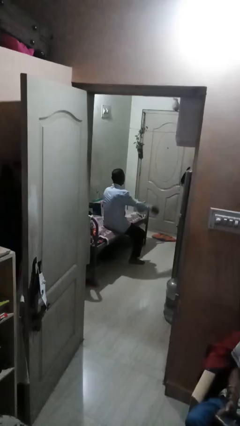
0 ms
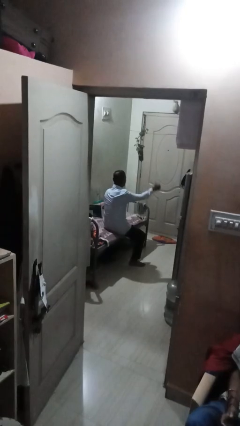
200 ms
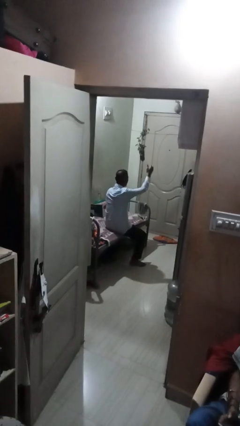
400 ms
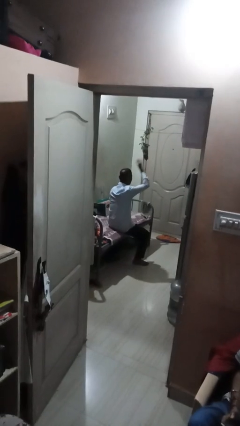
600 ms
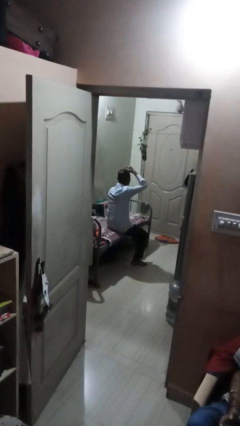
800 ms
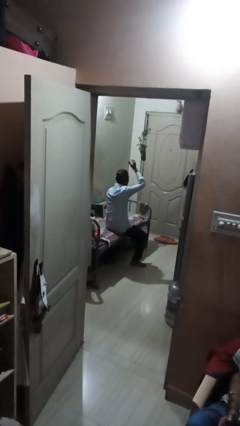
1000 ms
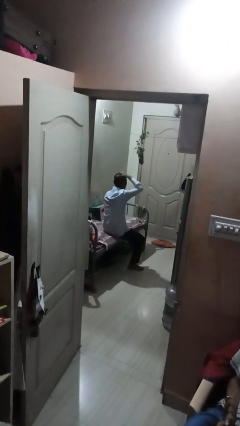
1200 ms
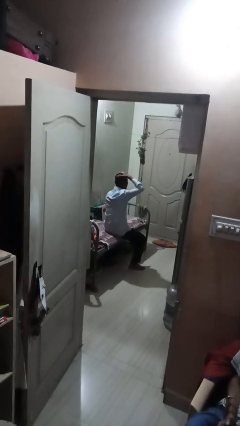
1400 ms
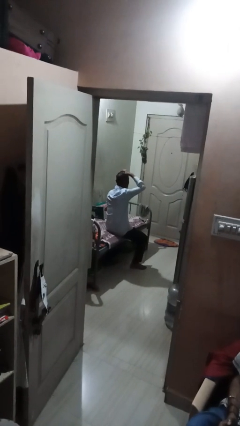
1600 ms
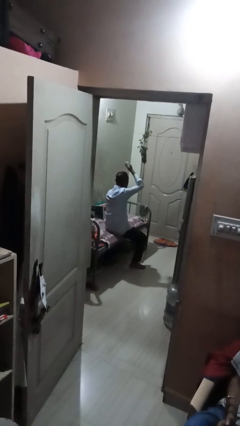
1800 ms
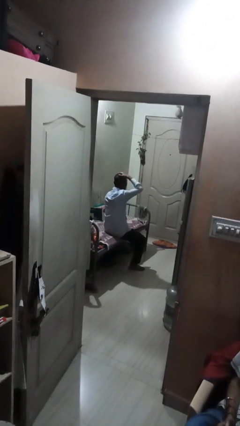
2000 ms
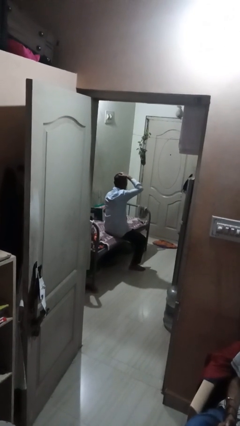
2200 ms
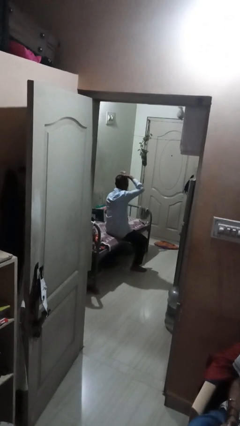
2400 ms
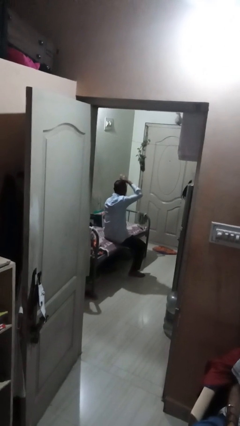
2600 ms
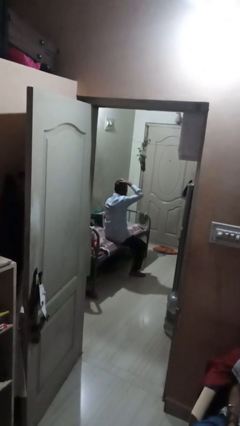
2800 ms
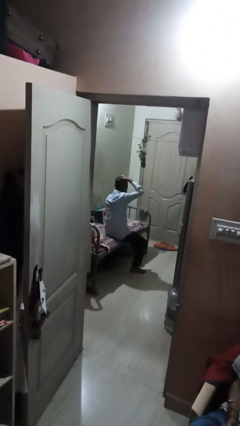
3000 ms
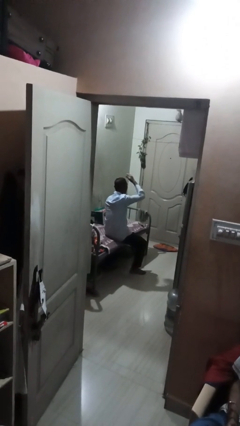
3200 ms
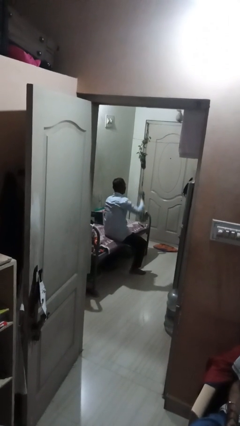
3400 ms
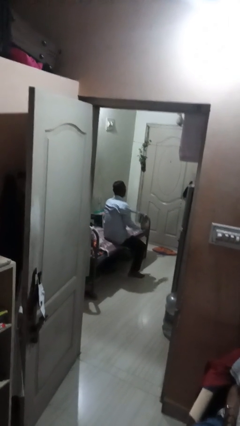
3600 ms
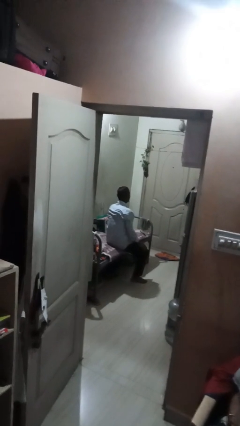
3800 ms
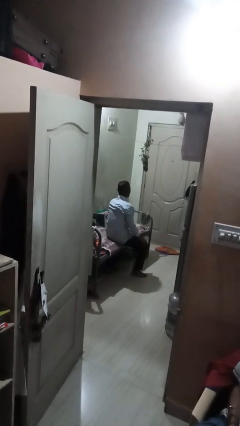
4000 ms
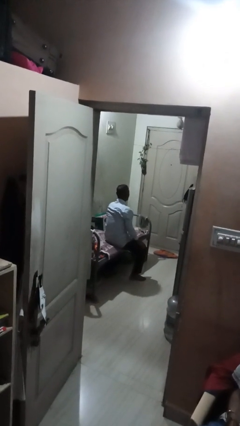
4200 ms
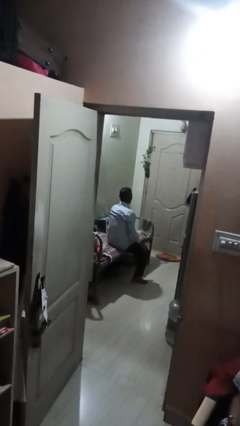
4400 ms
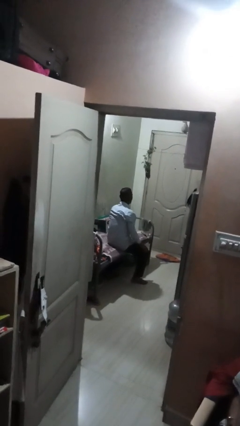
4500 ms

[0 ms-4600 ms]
person pats head

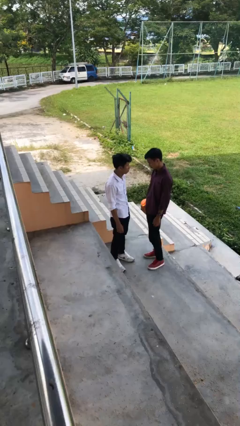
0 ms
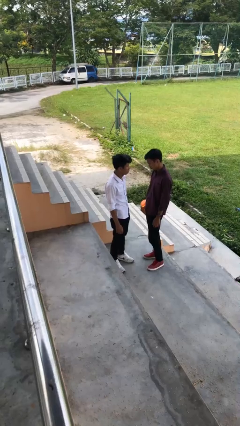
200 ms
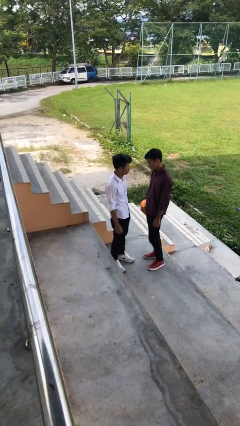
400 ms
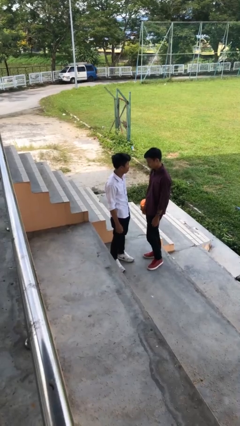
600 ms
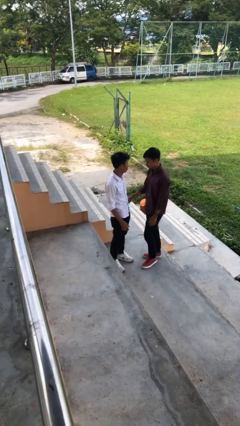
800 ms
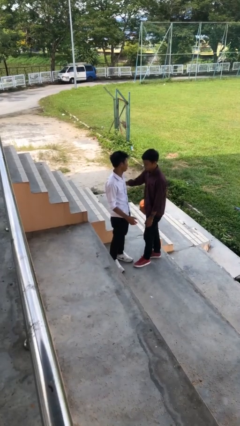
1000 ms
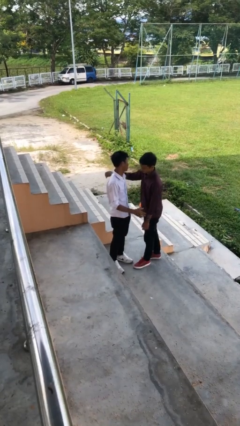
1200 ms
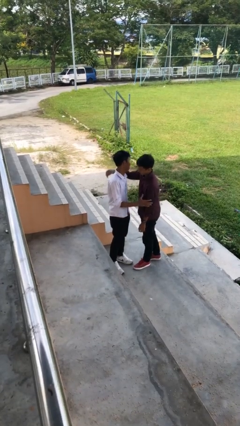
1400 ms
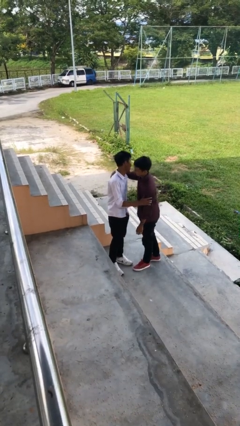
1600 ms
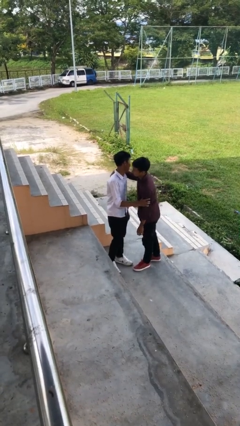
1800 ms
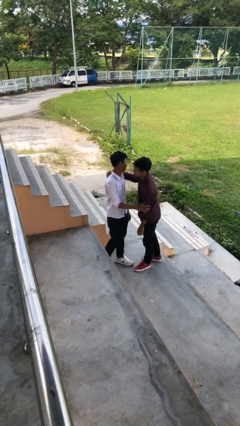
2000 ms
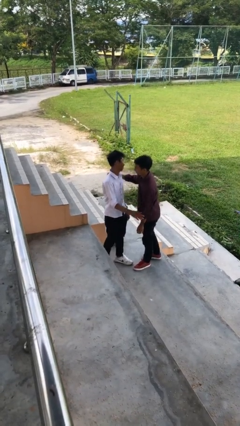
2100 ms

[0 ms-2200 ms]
person embraces person

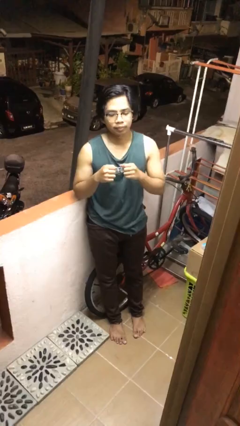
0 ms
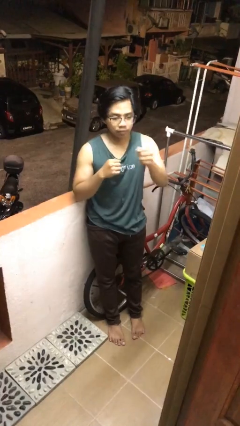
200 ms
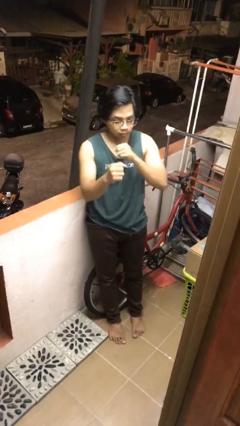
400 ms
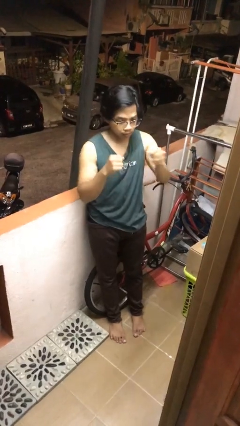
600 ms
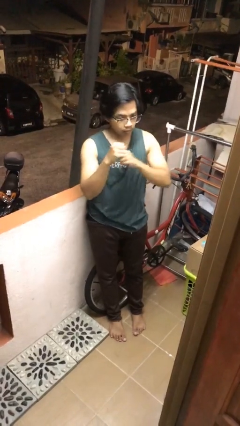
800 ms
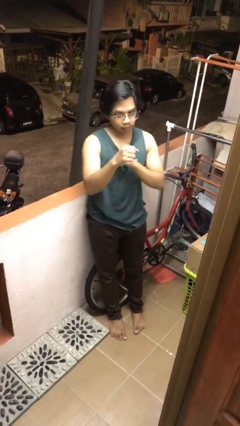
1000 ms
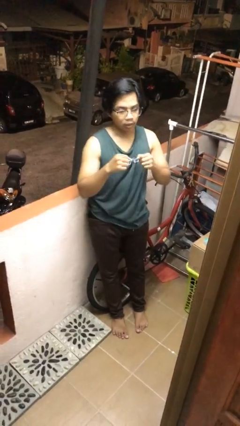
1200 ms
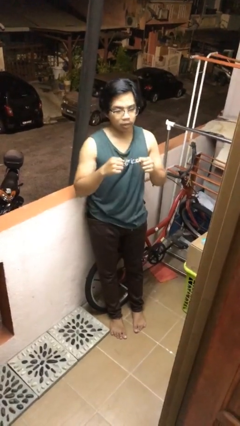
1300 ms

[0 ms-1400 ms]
person punches

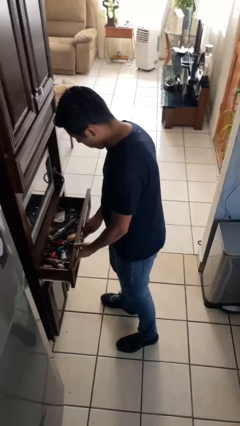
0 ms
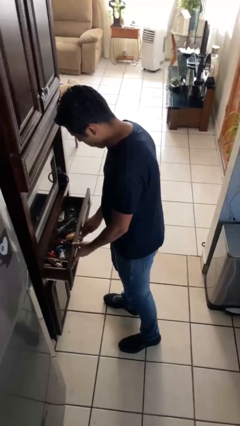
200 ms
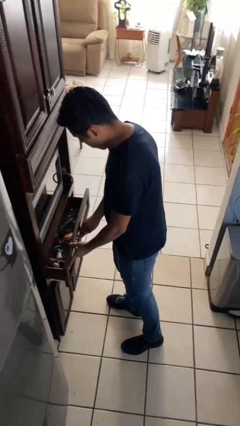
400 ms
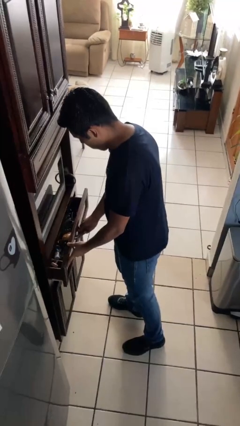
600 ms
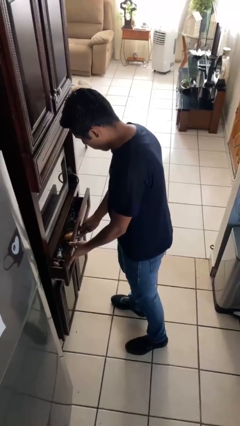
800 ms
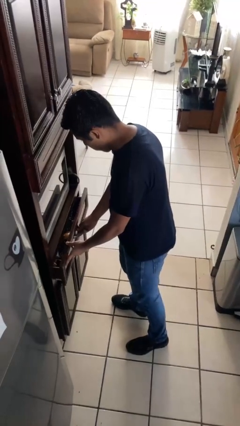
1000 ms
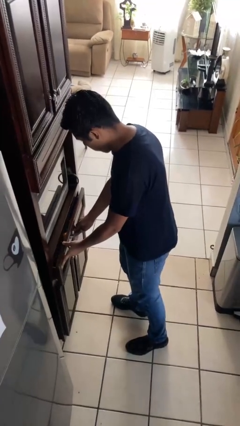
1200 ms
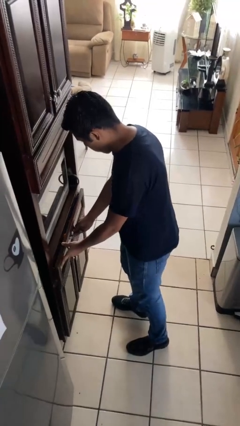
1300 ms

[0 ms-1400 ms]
person closes kitchen drawer

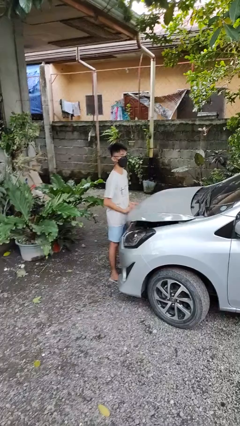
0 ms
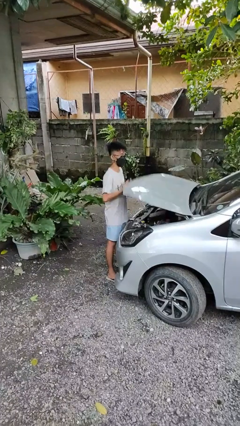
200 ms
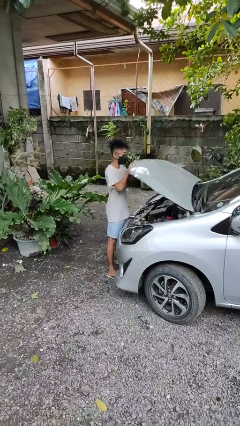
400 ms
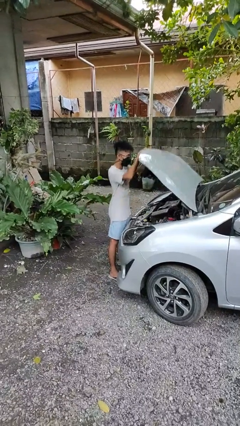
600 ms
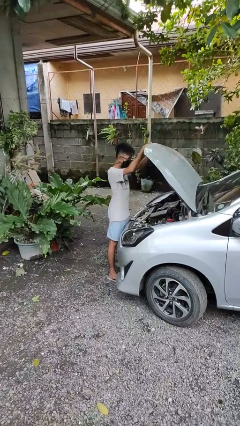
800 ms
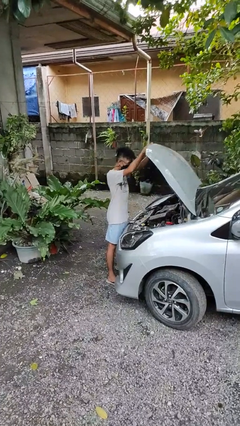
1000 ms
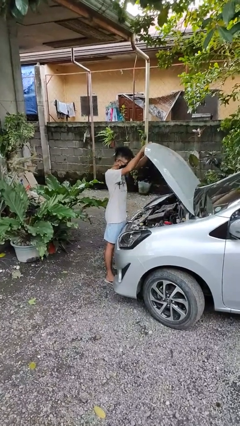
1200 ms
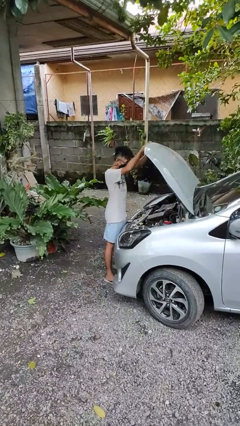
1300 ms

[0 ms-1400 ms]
person opens car hood

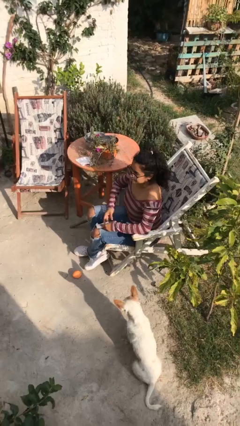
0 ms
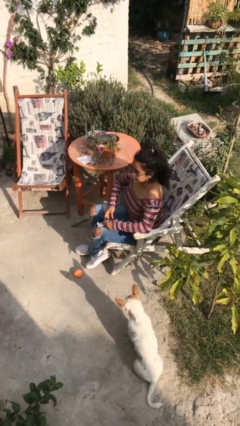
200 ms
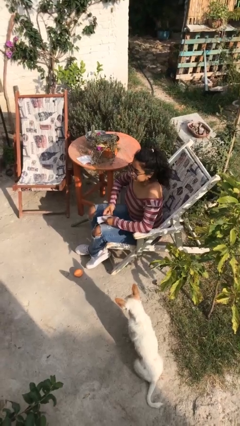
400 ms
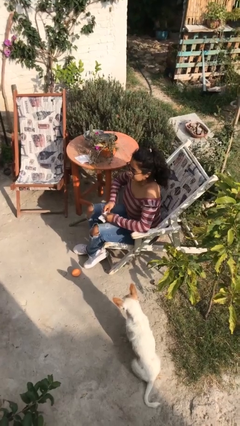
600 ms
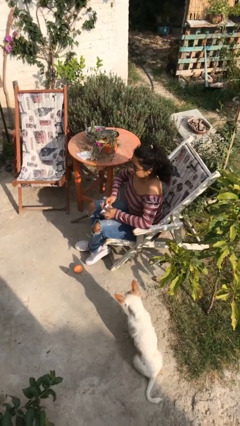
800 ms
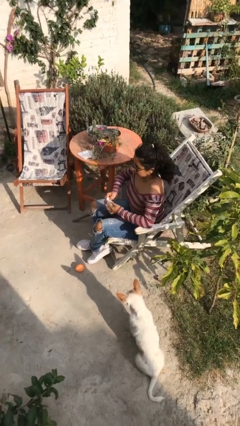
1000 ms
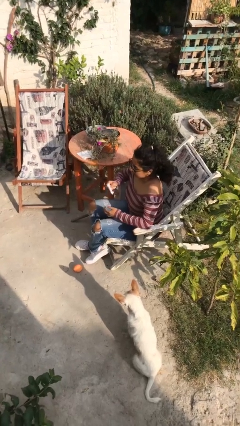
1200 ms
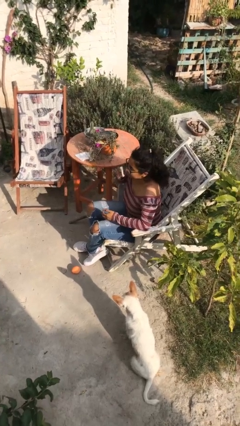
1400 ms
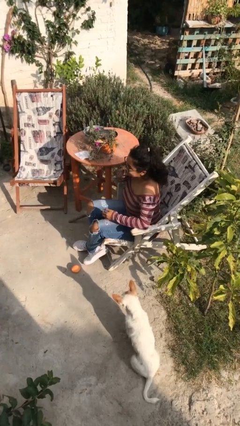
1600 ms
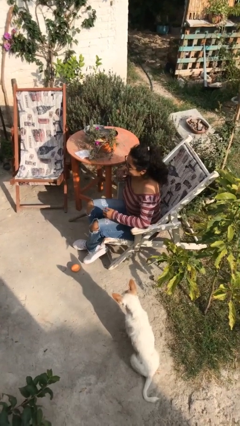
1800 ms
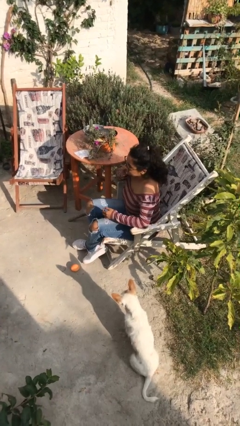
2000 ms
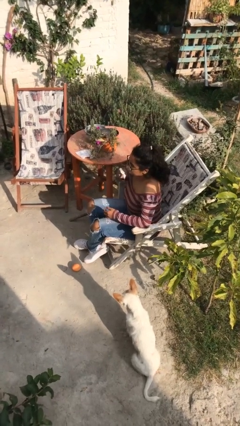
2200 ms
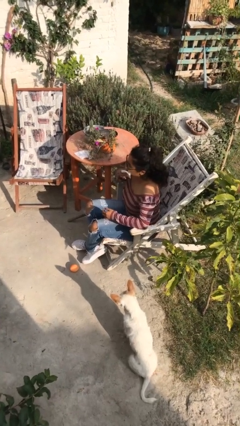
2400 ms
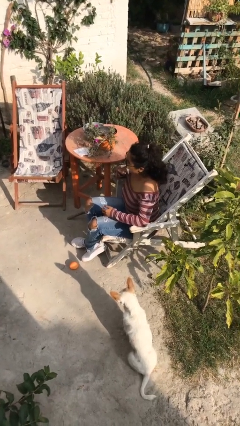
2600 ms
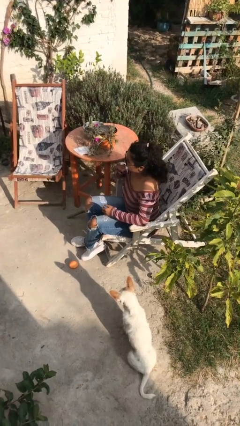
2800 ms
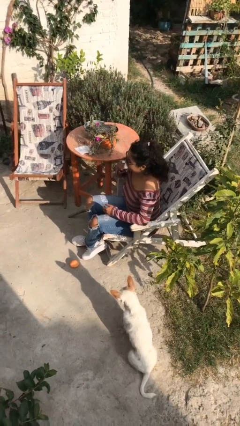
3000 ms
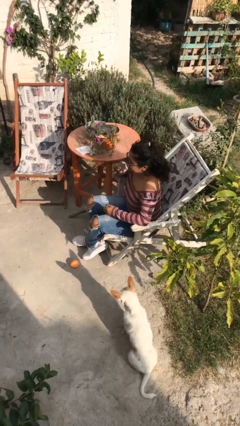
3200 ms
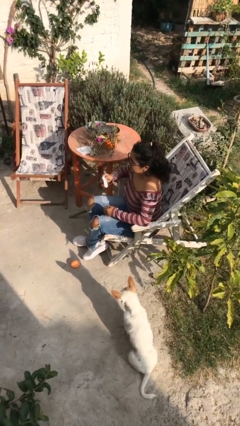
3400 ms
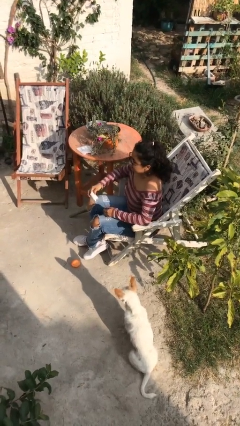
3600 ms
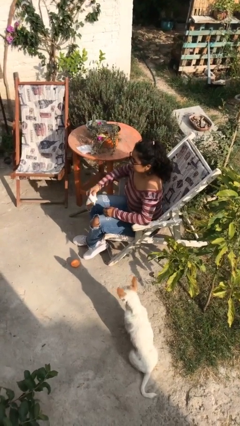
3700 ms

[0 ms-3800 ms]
person wipes mouth with napkin

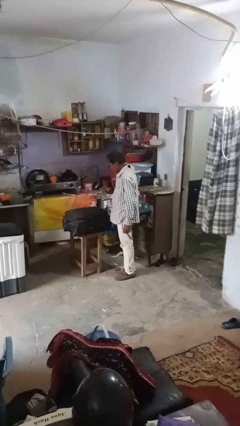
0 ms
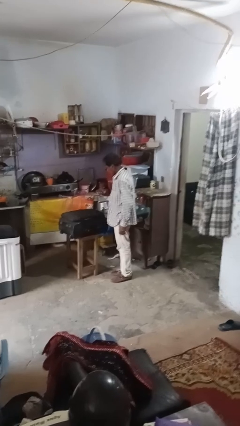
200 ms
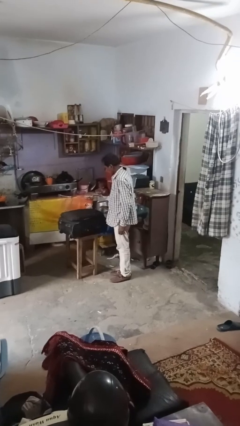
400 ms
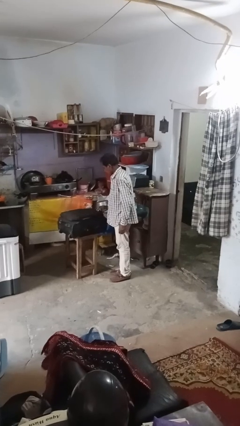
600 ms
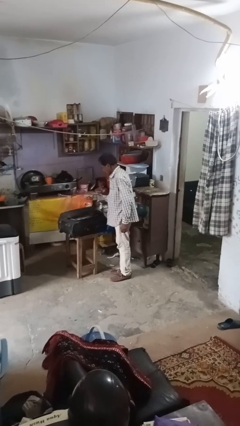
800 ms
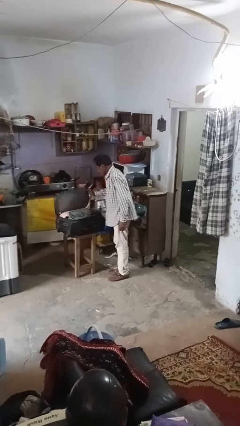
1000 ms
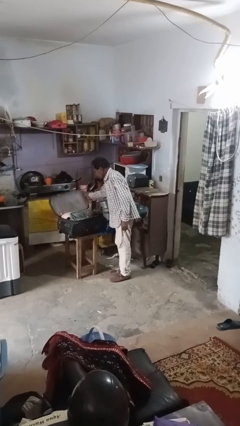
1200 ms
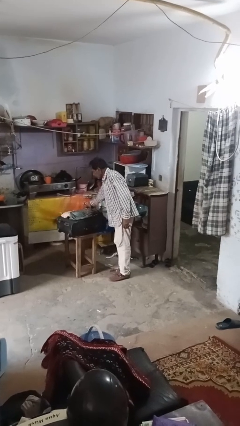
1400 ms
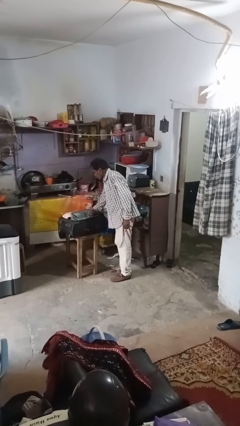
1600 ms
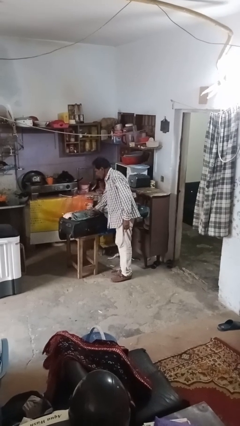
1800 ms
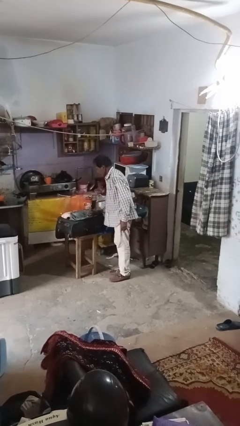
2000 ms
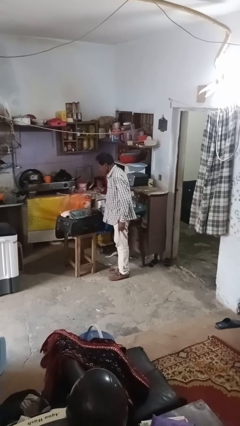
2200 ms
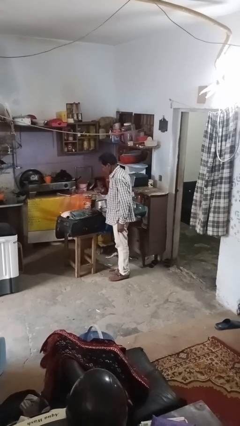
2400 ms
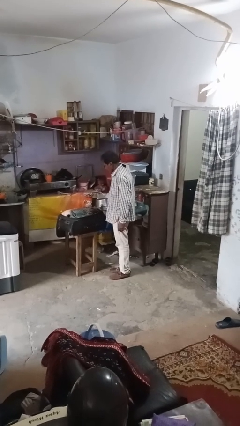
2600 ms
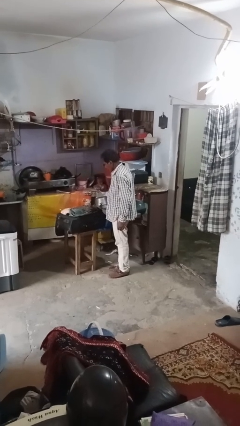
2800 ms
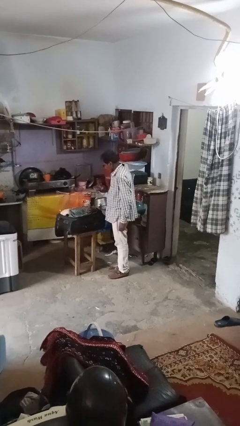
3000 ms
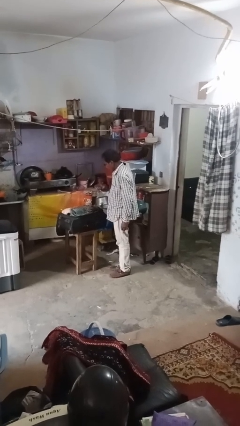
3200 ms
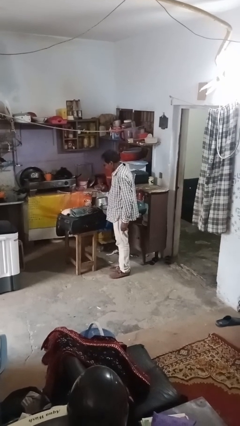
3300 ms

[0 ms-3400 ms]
person opens suitcase
